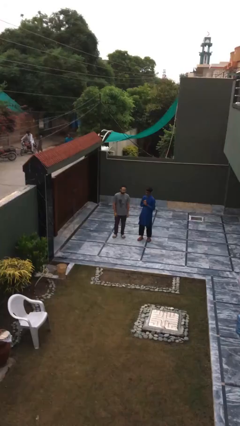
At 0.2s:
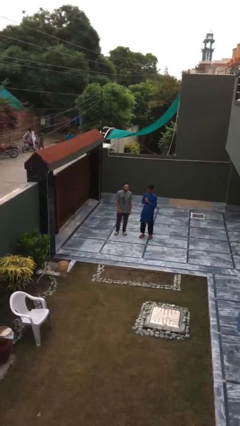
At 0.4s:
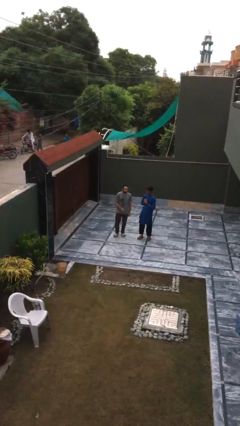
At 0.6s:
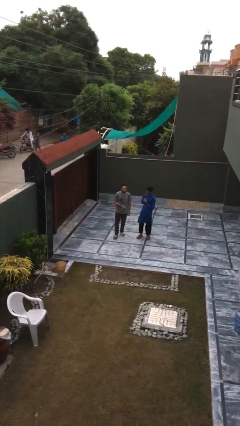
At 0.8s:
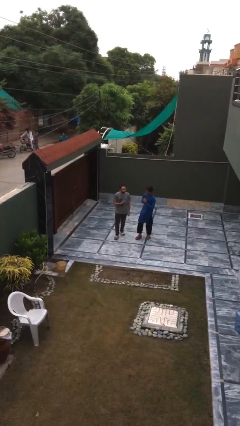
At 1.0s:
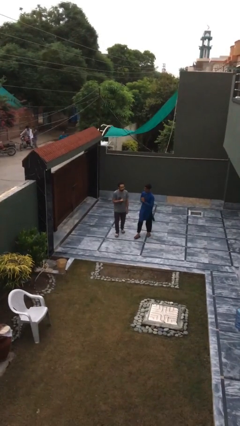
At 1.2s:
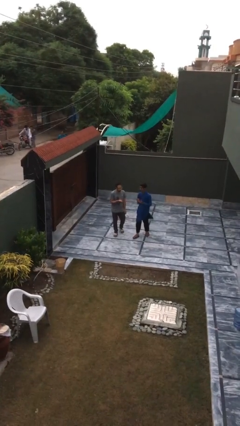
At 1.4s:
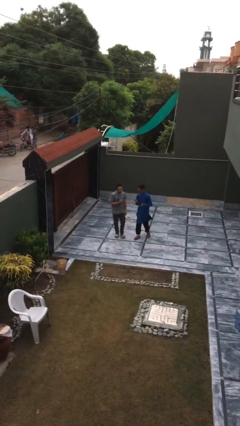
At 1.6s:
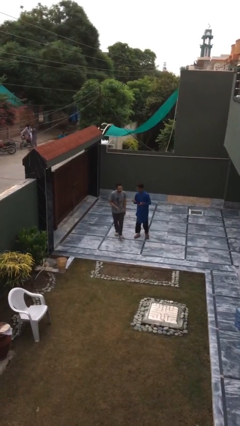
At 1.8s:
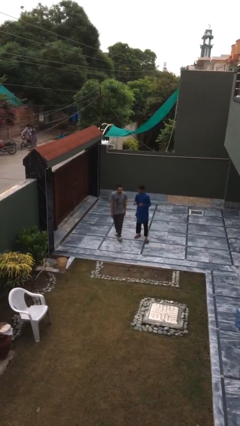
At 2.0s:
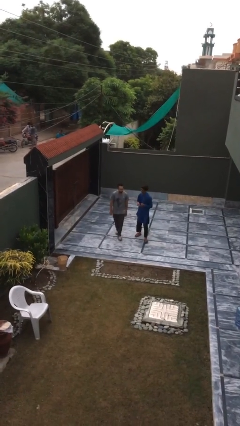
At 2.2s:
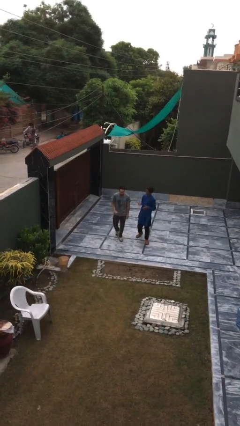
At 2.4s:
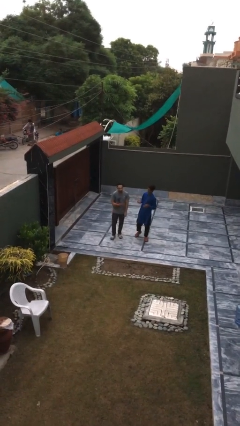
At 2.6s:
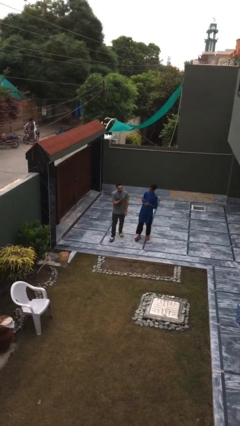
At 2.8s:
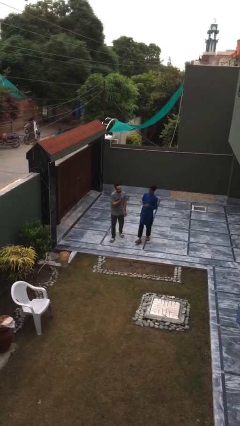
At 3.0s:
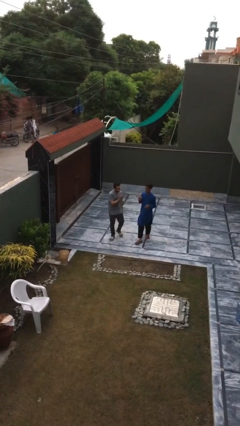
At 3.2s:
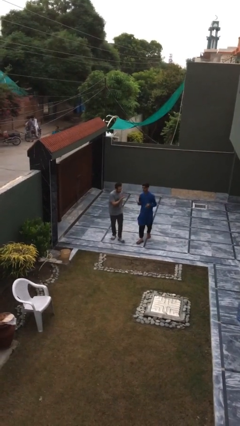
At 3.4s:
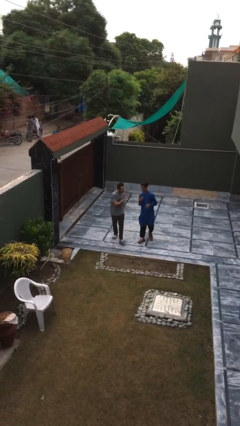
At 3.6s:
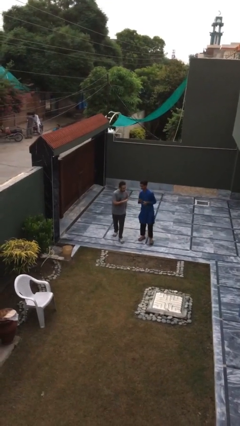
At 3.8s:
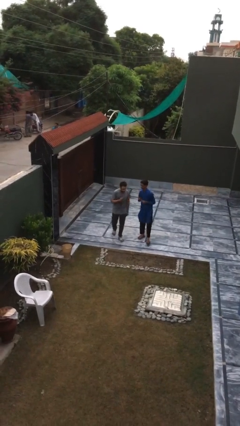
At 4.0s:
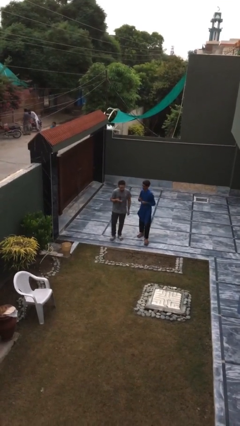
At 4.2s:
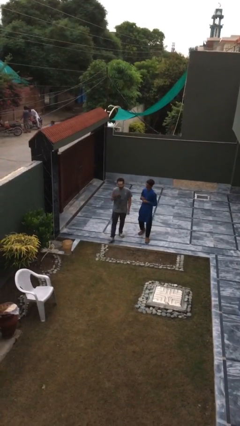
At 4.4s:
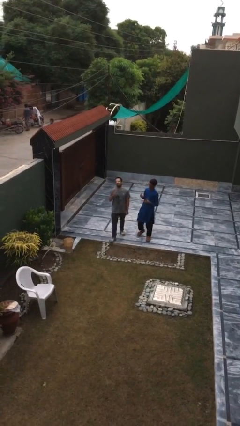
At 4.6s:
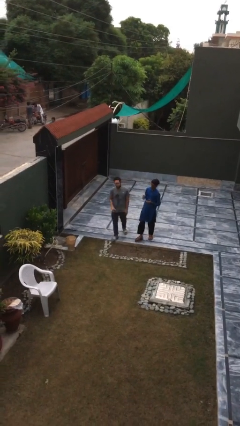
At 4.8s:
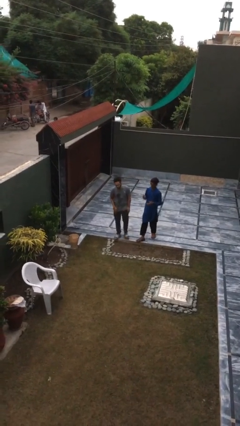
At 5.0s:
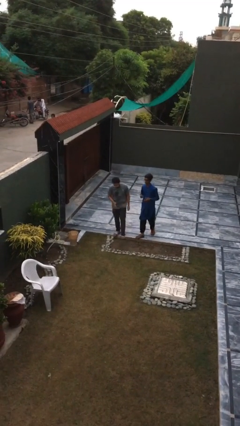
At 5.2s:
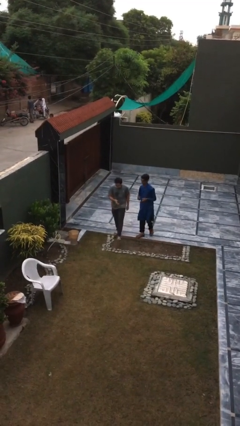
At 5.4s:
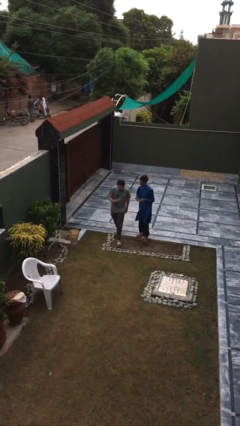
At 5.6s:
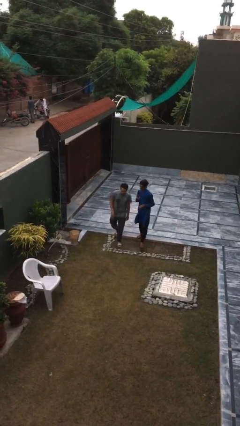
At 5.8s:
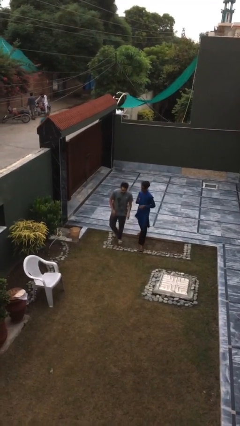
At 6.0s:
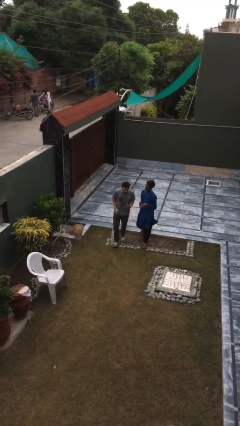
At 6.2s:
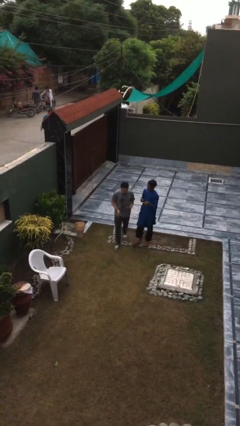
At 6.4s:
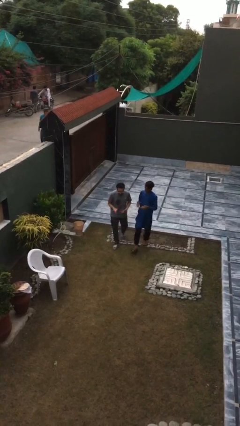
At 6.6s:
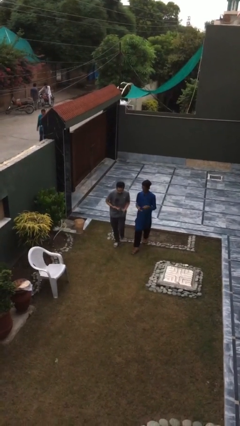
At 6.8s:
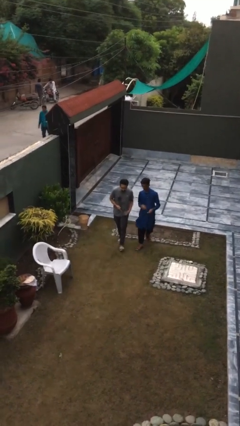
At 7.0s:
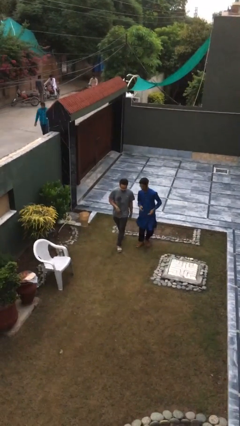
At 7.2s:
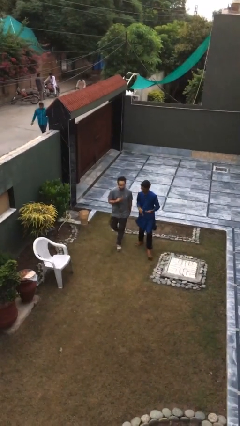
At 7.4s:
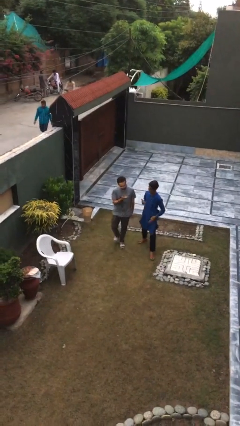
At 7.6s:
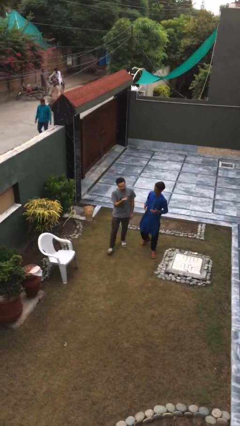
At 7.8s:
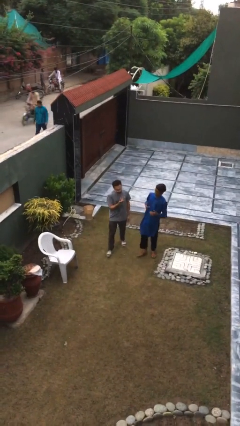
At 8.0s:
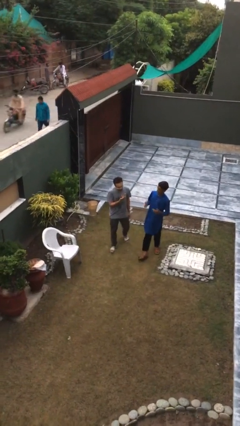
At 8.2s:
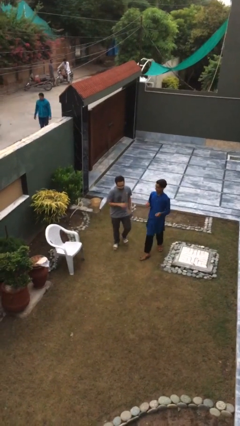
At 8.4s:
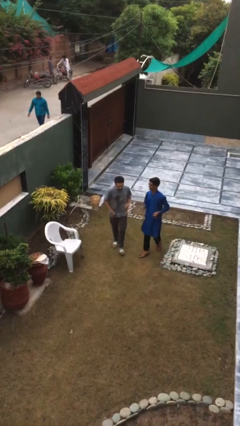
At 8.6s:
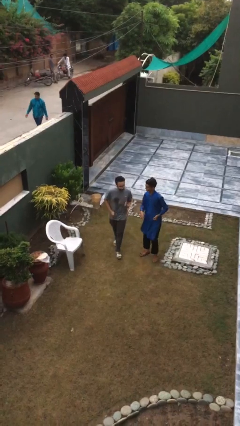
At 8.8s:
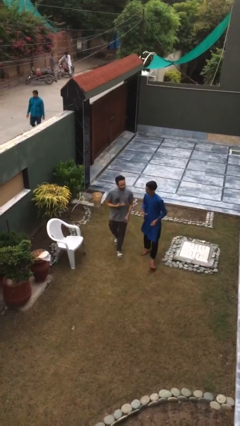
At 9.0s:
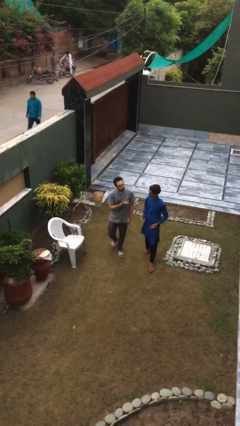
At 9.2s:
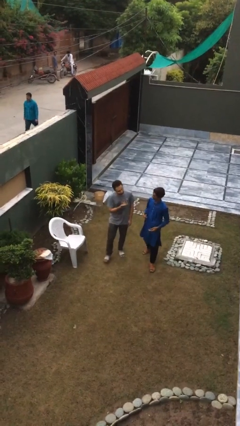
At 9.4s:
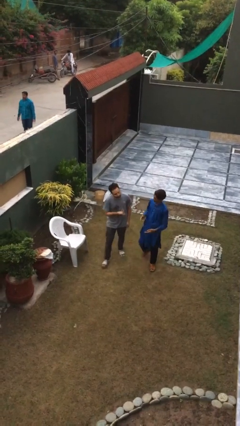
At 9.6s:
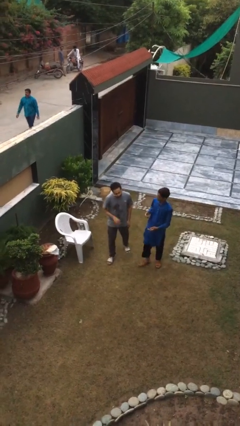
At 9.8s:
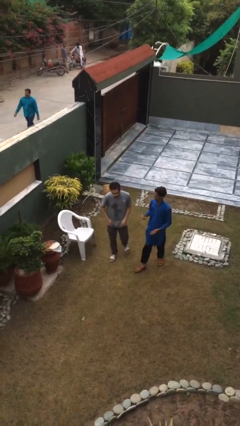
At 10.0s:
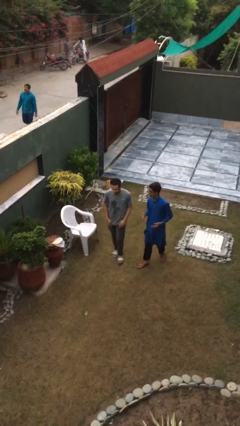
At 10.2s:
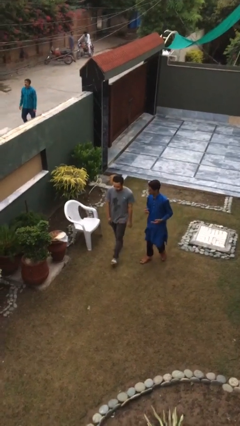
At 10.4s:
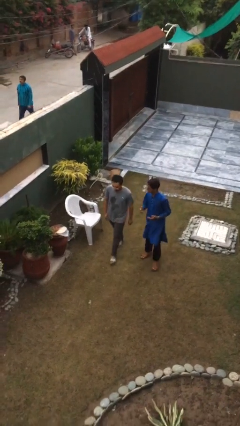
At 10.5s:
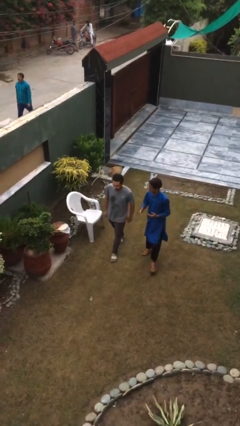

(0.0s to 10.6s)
person talks to person

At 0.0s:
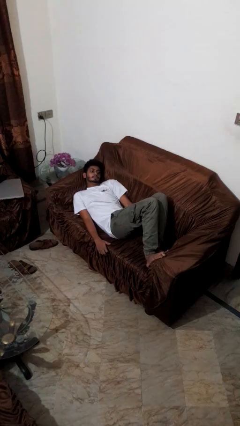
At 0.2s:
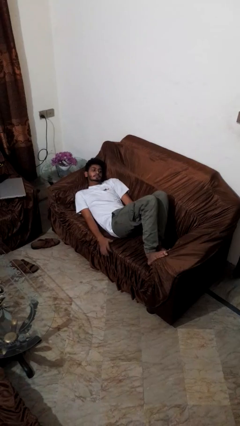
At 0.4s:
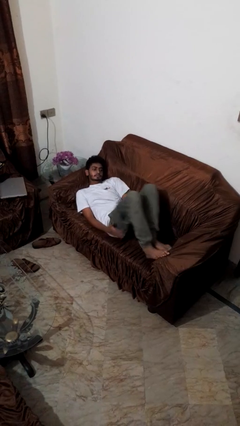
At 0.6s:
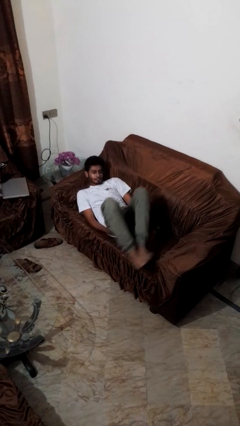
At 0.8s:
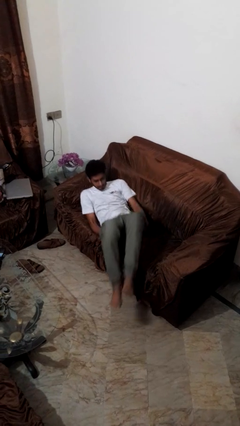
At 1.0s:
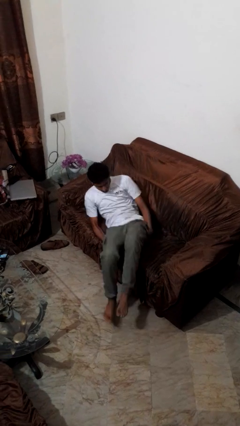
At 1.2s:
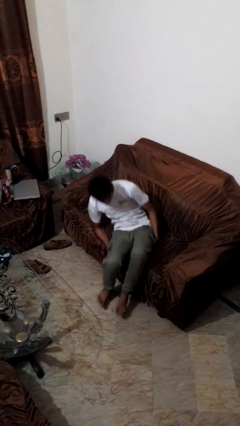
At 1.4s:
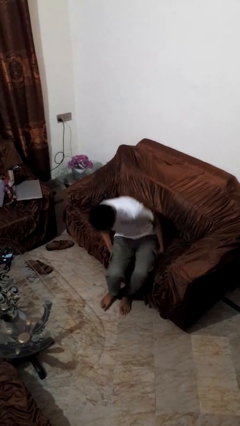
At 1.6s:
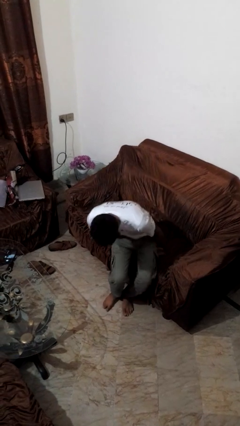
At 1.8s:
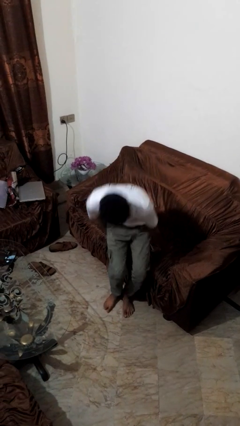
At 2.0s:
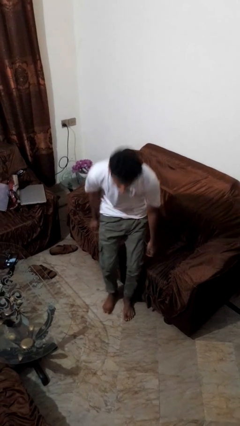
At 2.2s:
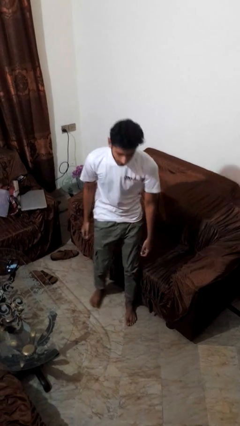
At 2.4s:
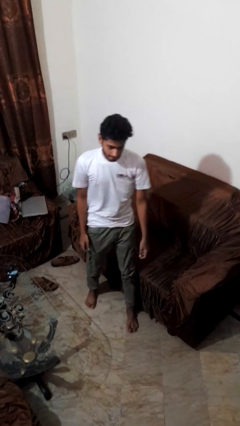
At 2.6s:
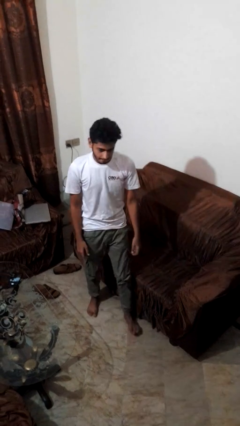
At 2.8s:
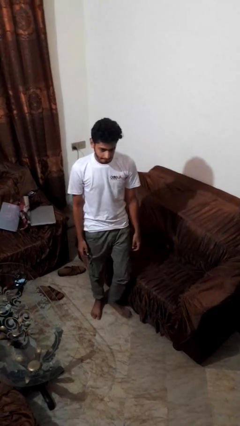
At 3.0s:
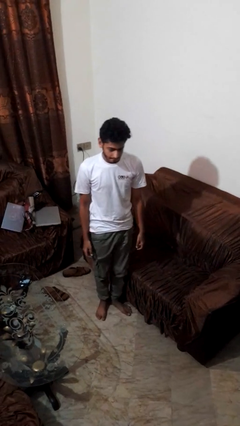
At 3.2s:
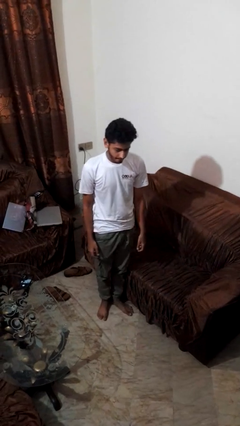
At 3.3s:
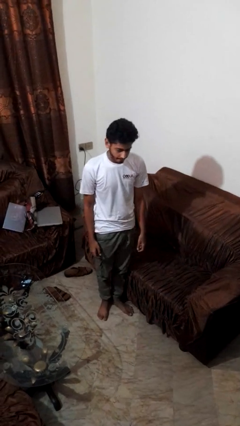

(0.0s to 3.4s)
person stands up

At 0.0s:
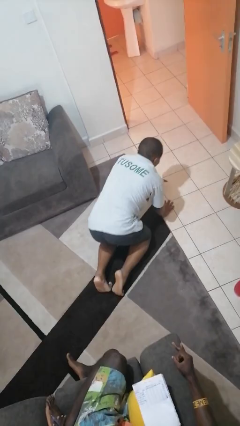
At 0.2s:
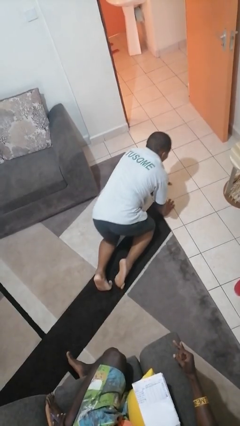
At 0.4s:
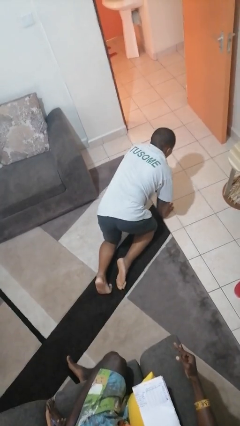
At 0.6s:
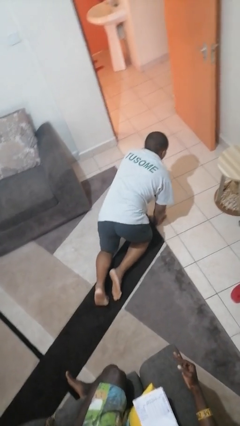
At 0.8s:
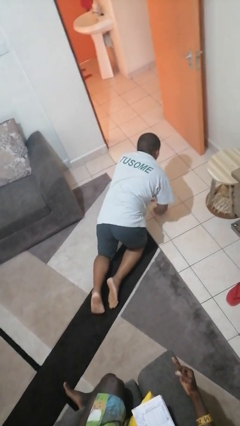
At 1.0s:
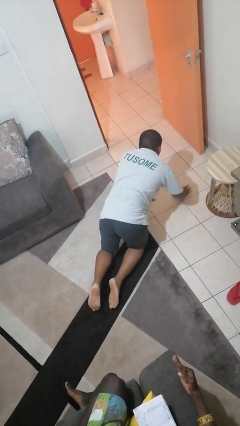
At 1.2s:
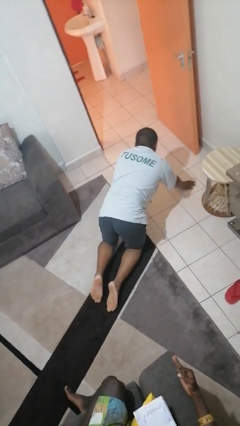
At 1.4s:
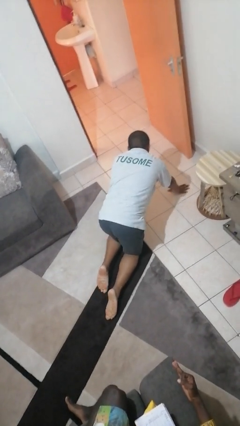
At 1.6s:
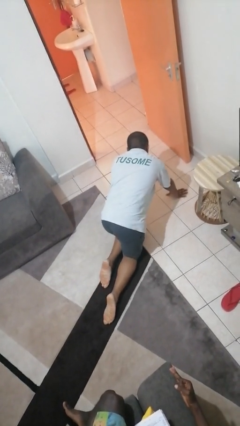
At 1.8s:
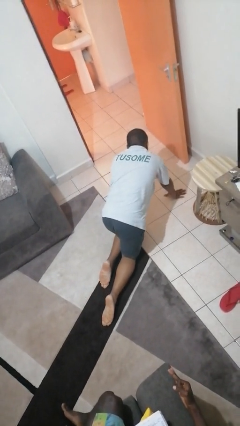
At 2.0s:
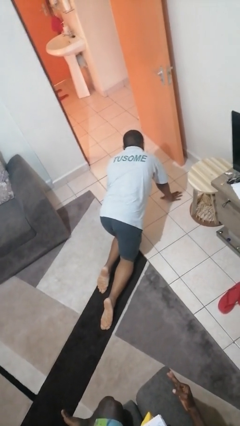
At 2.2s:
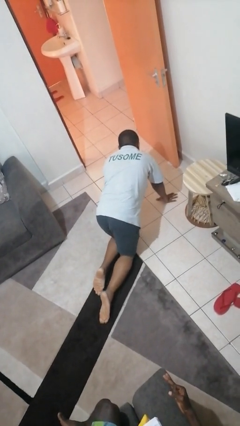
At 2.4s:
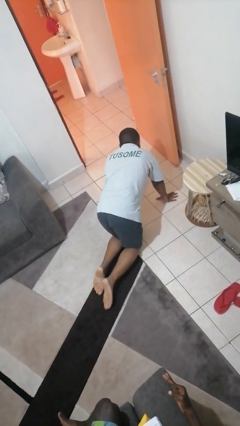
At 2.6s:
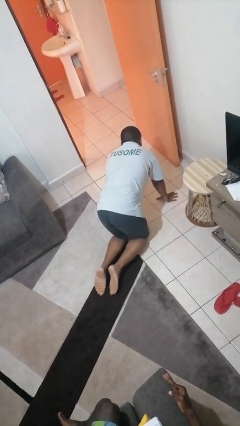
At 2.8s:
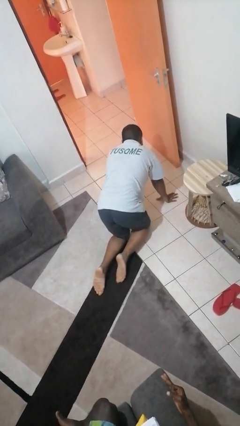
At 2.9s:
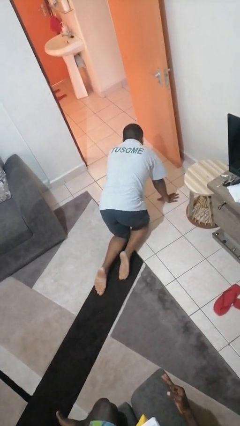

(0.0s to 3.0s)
person crawls

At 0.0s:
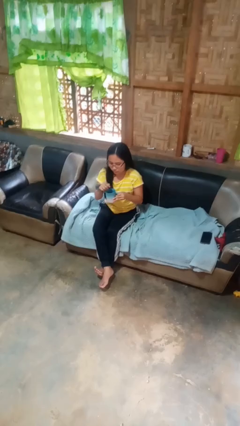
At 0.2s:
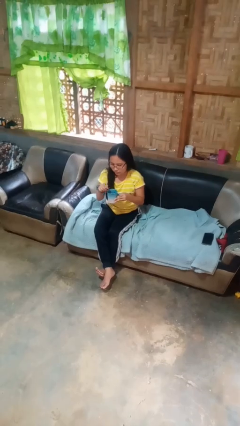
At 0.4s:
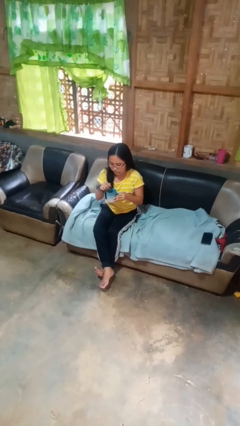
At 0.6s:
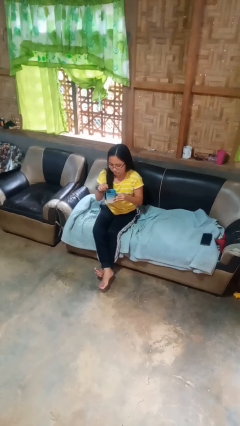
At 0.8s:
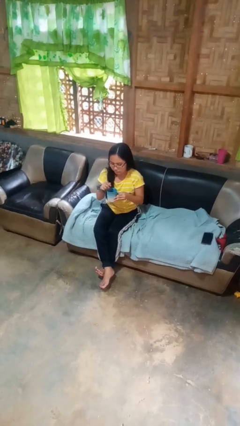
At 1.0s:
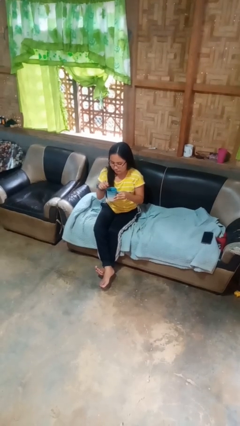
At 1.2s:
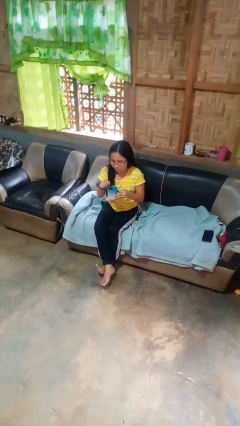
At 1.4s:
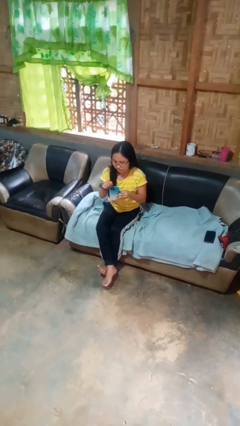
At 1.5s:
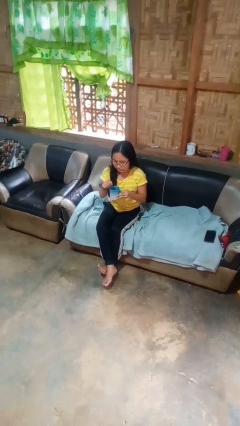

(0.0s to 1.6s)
person stirs mug
